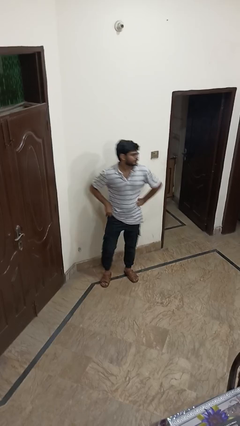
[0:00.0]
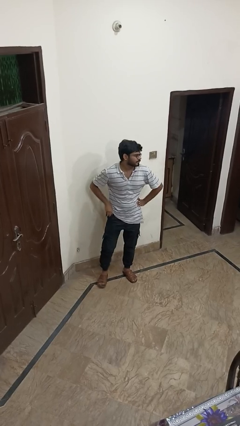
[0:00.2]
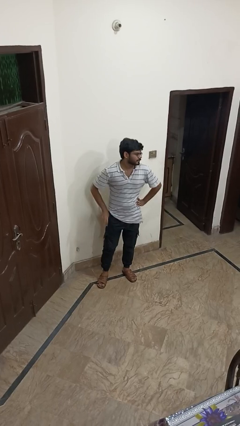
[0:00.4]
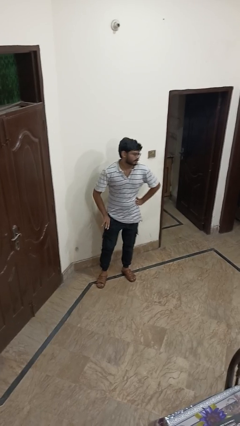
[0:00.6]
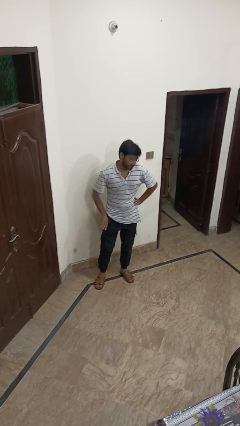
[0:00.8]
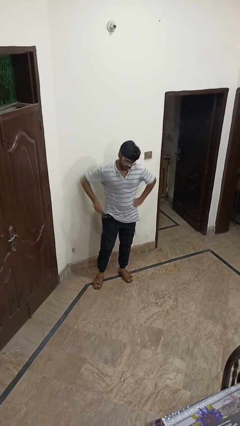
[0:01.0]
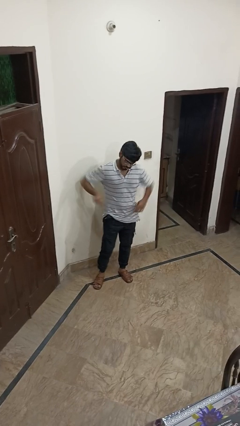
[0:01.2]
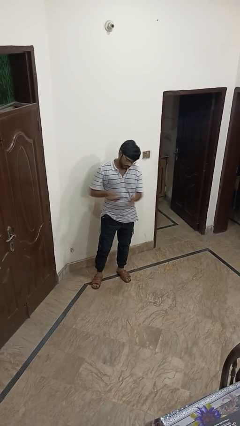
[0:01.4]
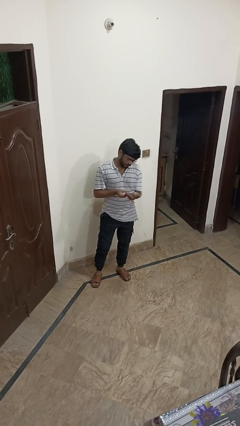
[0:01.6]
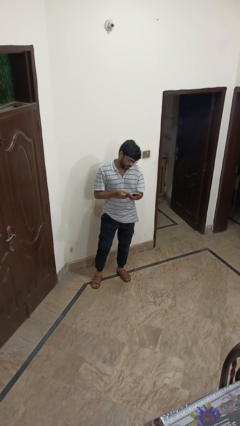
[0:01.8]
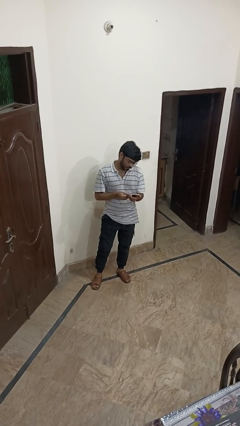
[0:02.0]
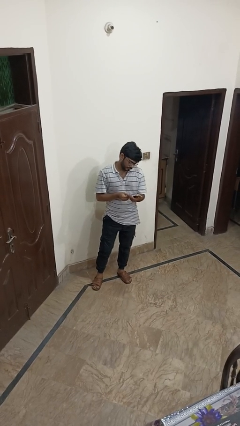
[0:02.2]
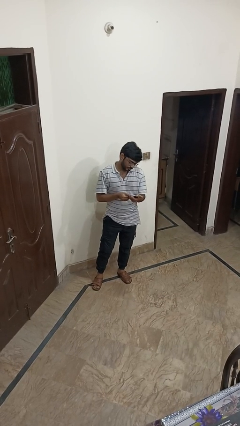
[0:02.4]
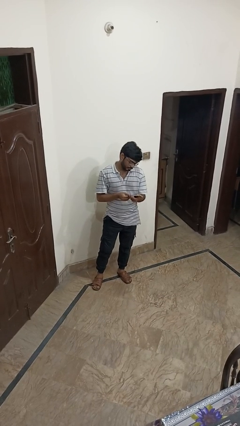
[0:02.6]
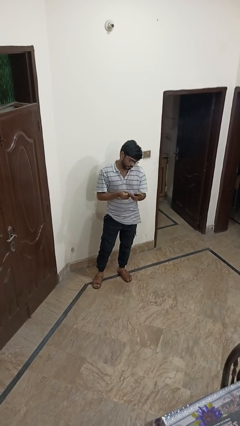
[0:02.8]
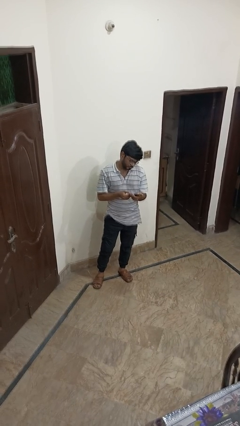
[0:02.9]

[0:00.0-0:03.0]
person takes phone from pocket

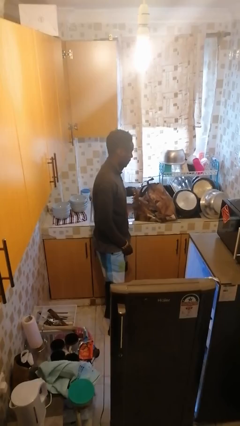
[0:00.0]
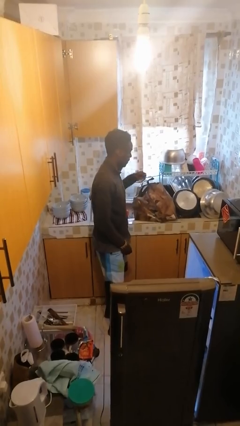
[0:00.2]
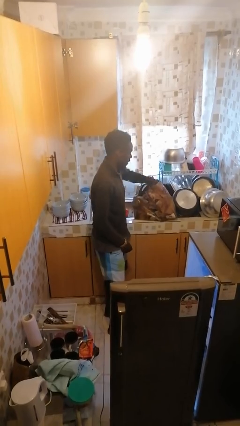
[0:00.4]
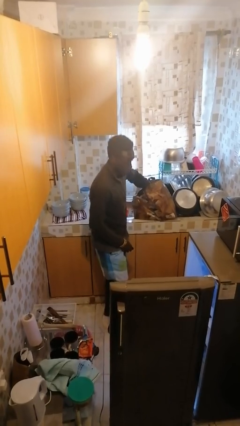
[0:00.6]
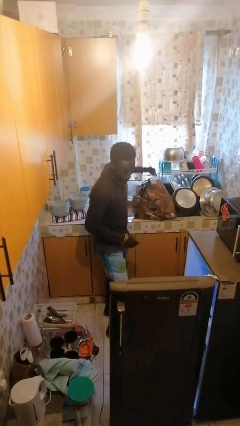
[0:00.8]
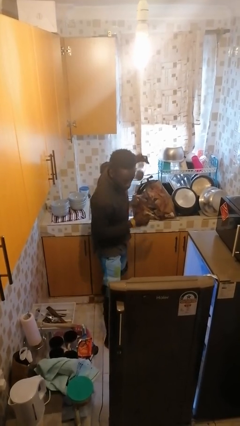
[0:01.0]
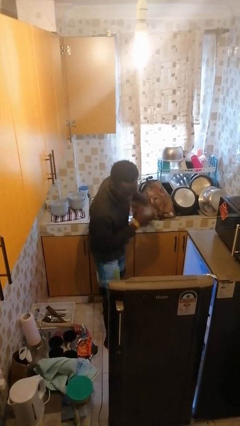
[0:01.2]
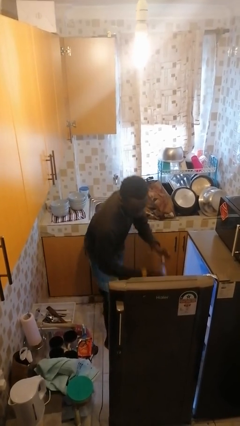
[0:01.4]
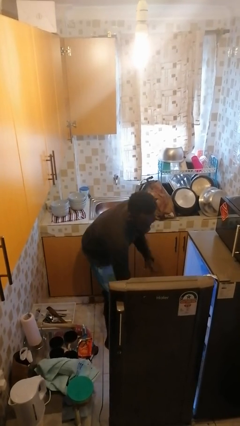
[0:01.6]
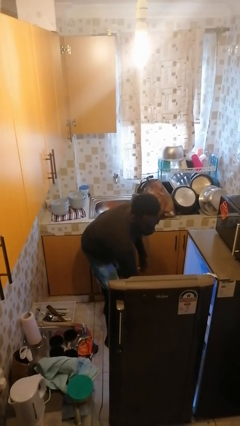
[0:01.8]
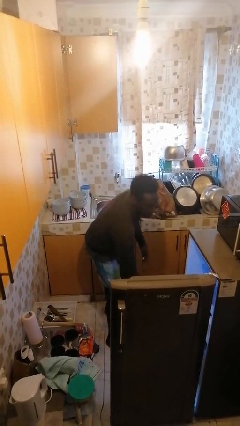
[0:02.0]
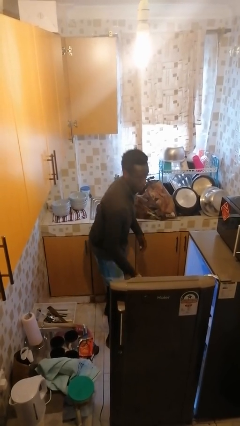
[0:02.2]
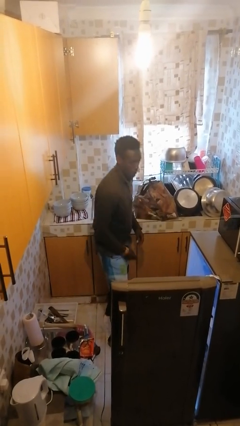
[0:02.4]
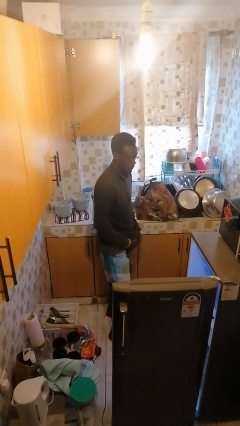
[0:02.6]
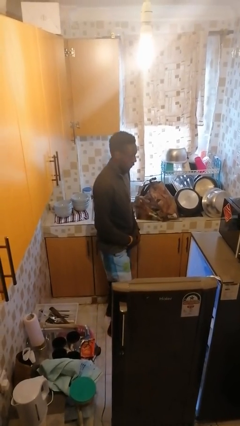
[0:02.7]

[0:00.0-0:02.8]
person loads groceries into refrigerator

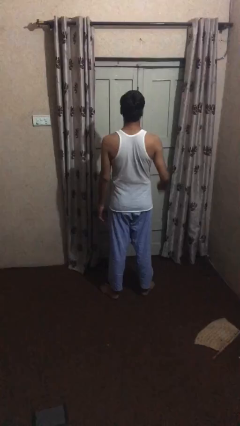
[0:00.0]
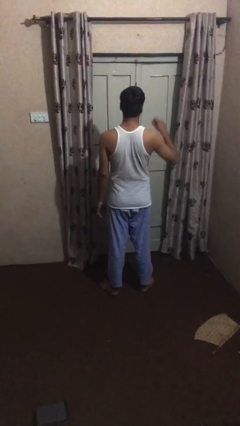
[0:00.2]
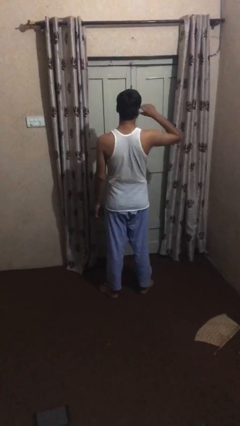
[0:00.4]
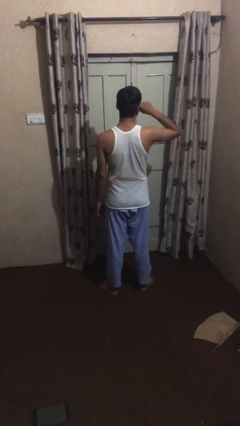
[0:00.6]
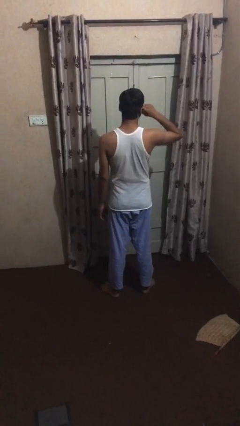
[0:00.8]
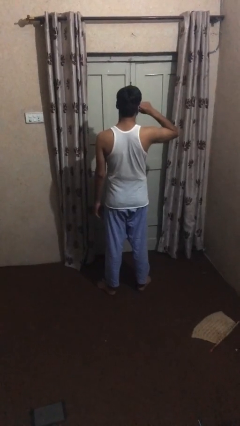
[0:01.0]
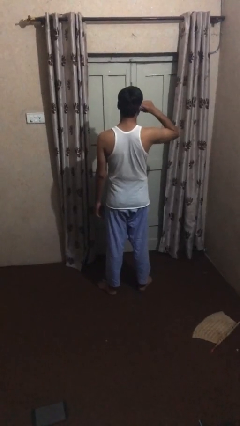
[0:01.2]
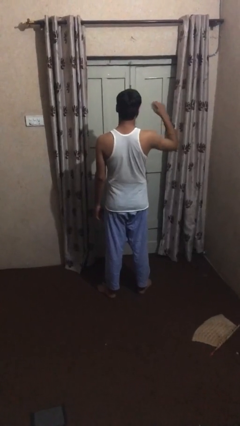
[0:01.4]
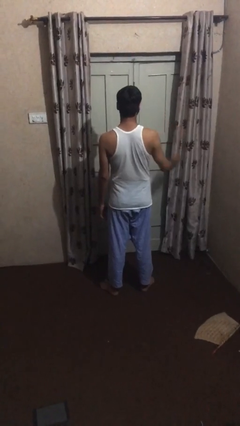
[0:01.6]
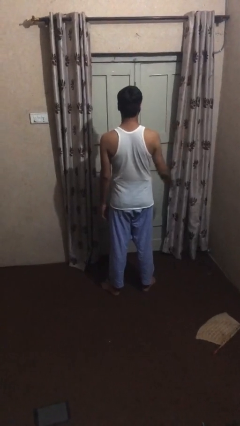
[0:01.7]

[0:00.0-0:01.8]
person scratches face

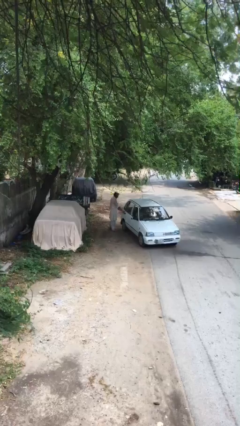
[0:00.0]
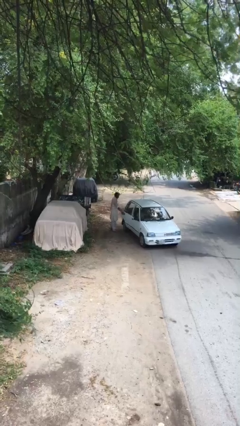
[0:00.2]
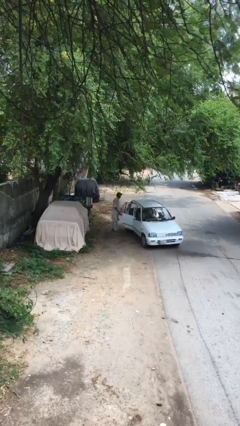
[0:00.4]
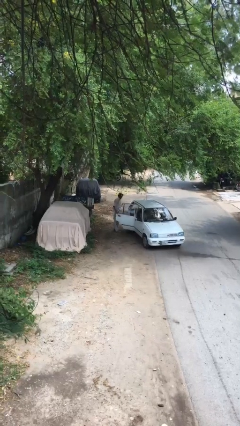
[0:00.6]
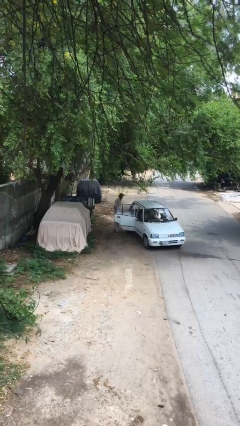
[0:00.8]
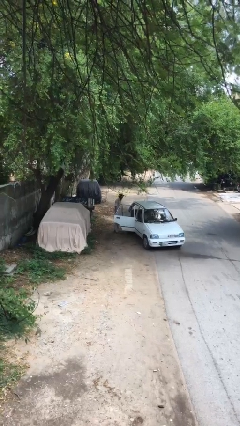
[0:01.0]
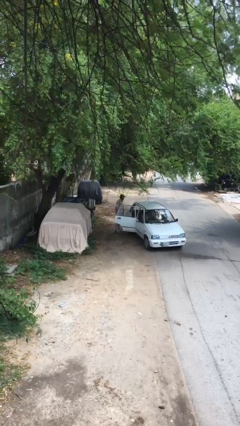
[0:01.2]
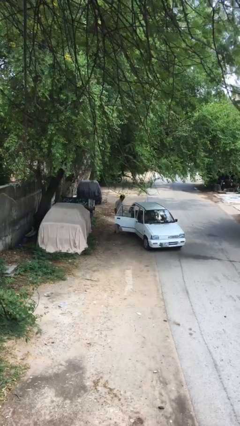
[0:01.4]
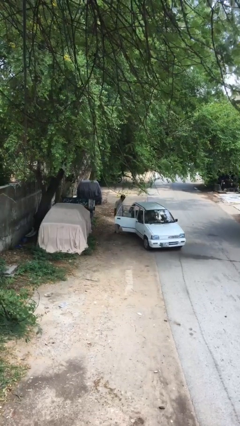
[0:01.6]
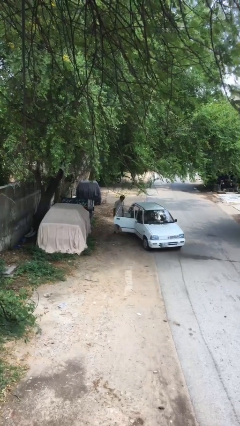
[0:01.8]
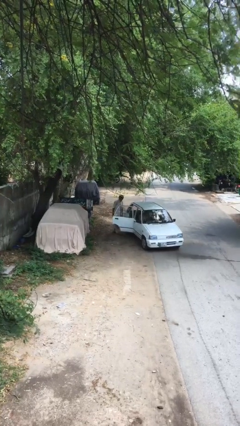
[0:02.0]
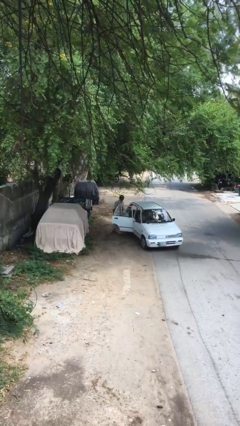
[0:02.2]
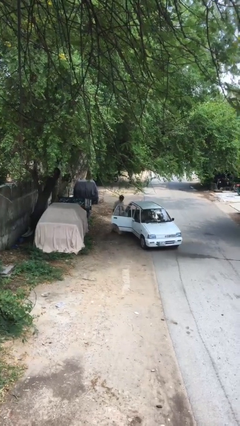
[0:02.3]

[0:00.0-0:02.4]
person opens car door

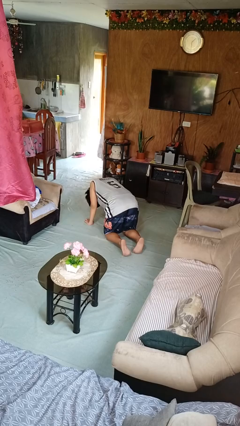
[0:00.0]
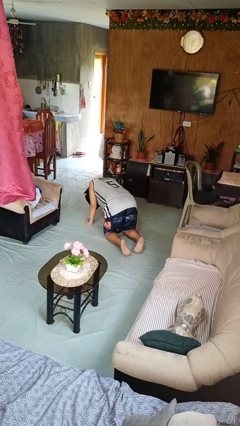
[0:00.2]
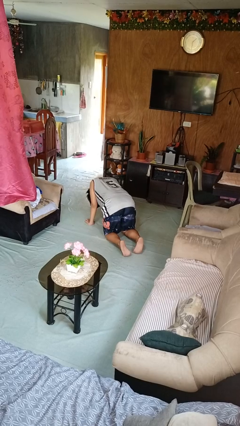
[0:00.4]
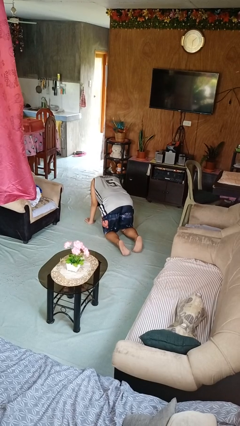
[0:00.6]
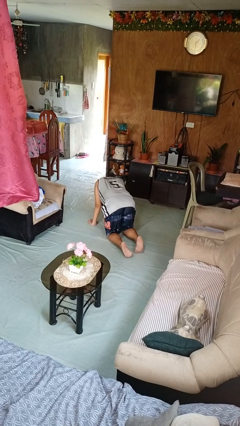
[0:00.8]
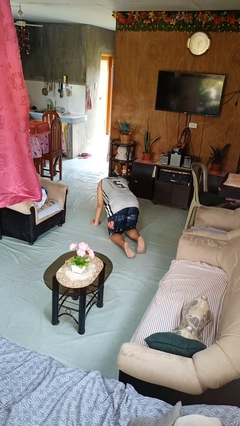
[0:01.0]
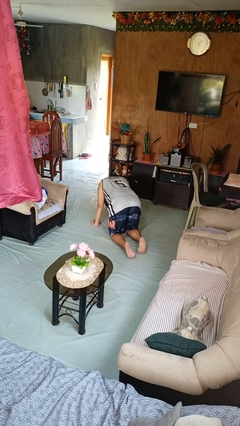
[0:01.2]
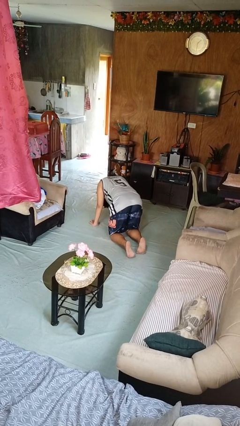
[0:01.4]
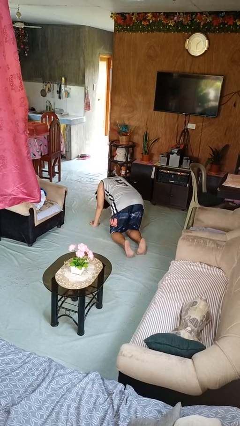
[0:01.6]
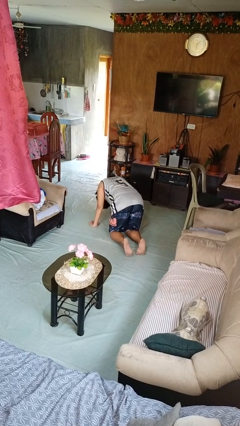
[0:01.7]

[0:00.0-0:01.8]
person crawls

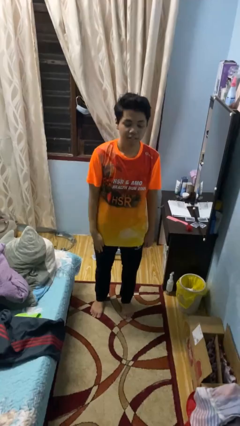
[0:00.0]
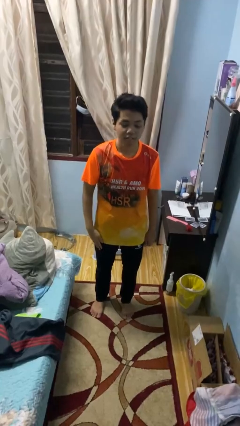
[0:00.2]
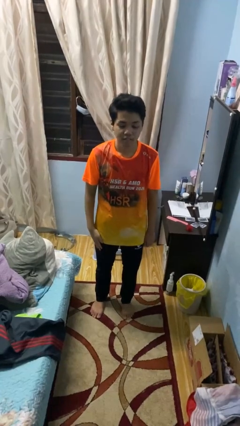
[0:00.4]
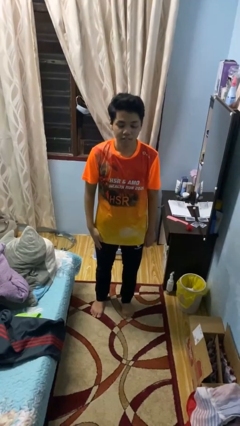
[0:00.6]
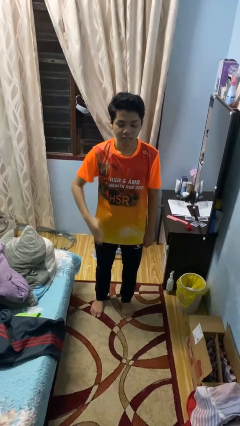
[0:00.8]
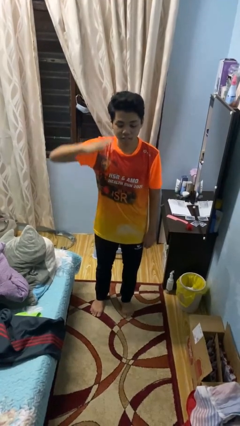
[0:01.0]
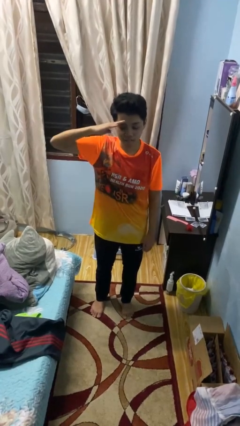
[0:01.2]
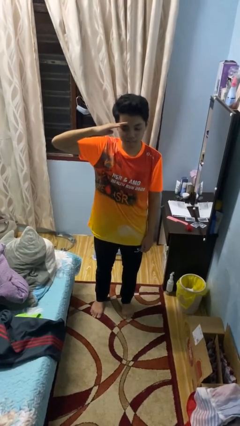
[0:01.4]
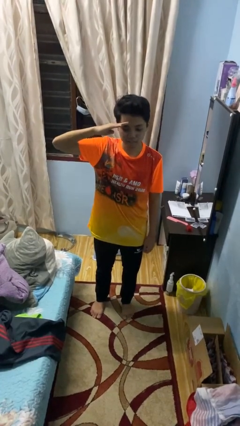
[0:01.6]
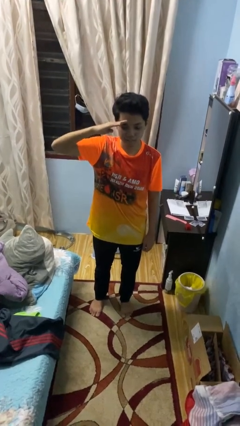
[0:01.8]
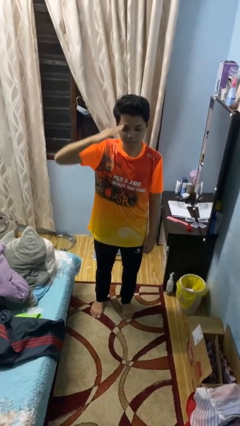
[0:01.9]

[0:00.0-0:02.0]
person salutes

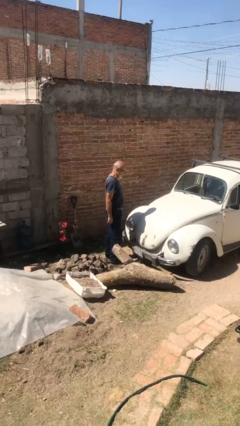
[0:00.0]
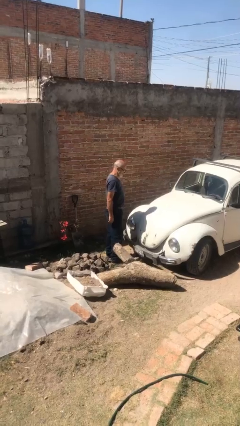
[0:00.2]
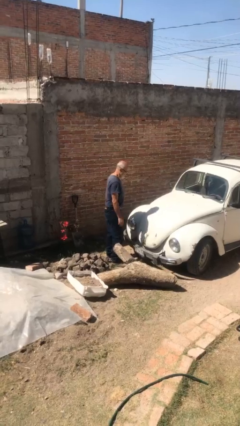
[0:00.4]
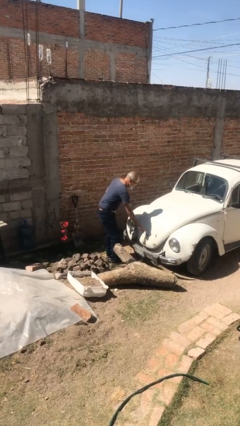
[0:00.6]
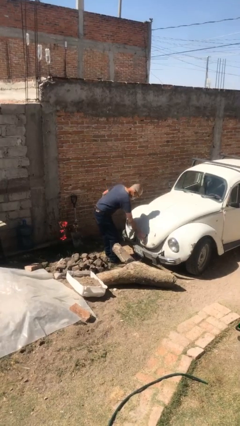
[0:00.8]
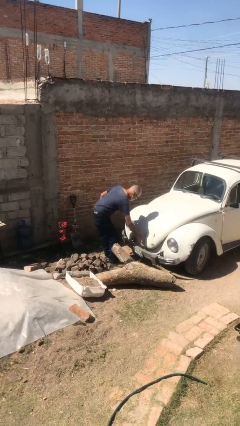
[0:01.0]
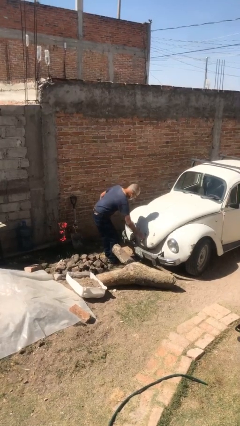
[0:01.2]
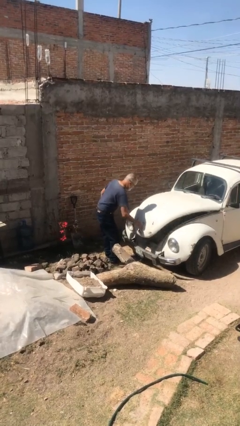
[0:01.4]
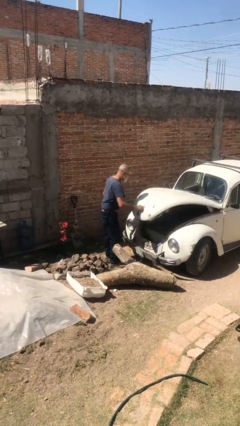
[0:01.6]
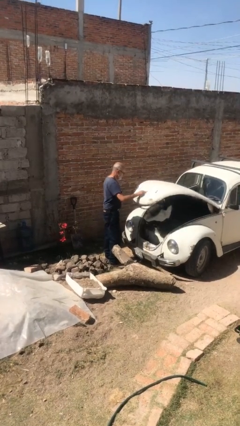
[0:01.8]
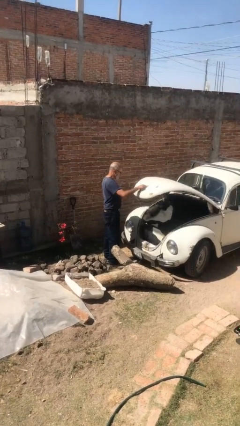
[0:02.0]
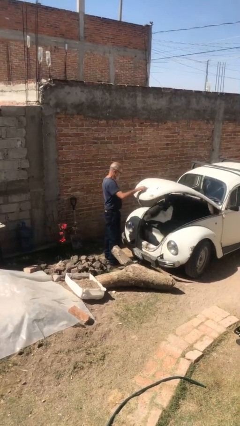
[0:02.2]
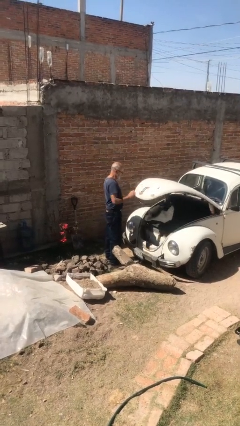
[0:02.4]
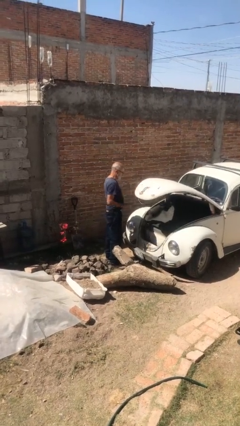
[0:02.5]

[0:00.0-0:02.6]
person opens car trunk

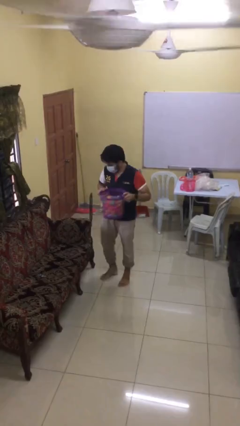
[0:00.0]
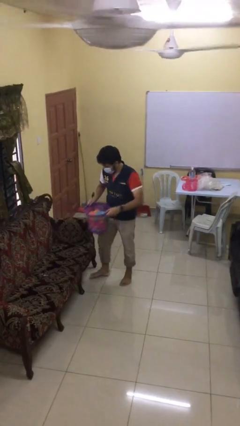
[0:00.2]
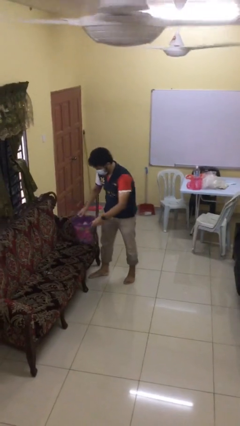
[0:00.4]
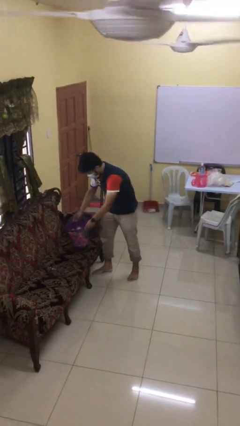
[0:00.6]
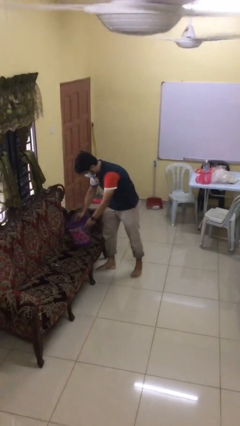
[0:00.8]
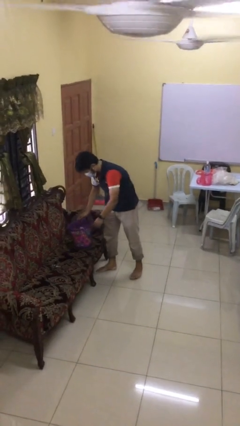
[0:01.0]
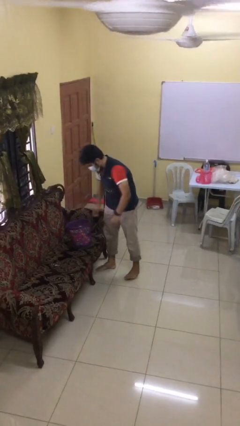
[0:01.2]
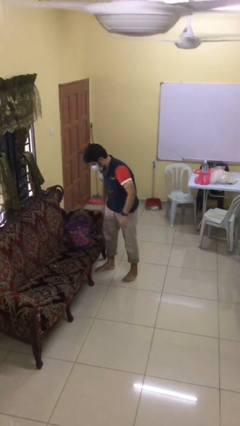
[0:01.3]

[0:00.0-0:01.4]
person puts down object on couch
